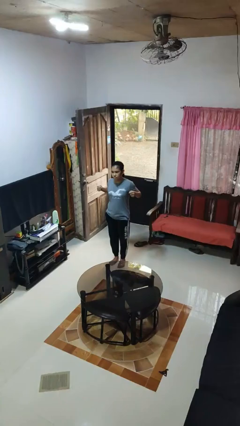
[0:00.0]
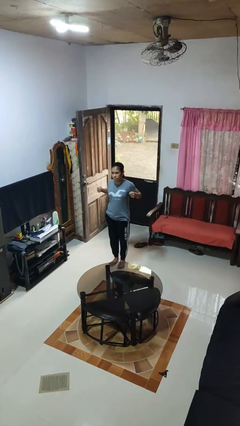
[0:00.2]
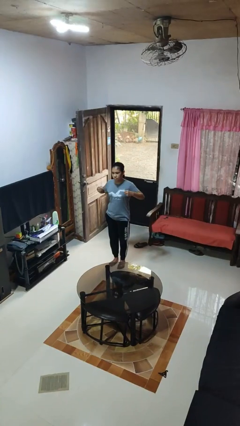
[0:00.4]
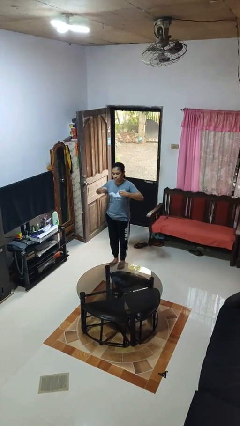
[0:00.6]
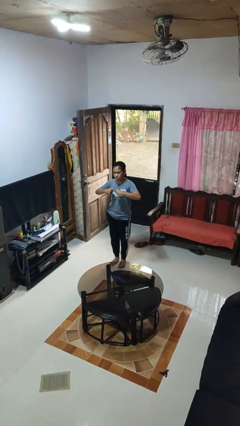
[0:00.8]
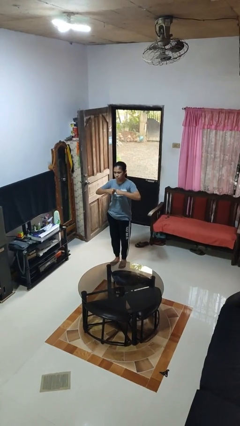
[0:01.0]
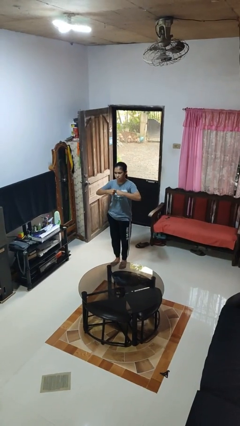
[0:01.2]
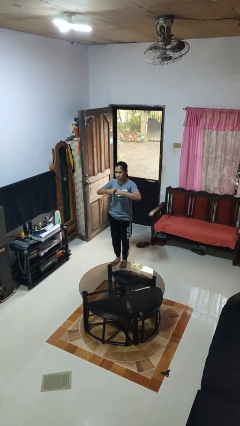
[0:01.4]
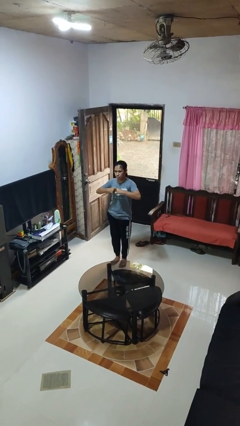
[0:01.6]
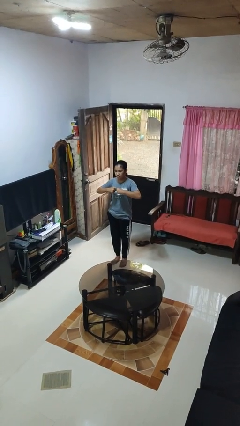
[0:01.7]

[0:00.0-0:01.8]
person gestures zoom out

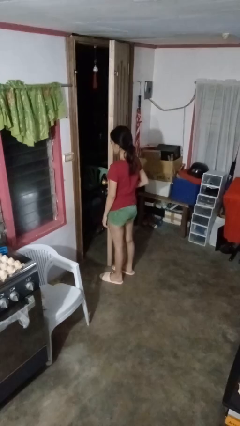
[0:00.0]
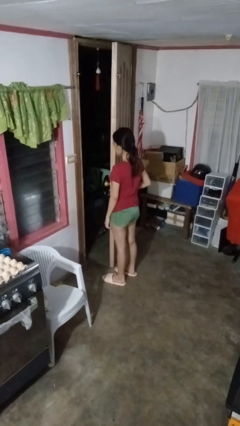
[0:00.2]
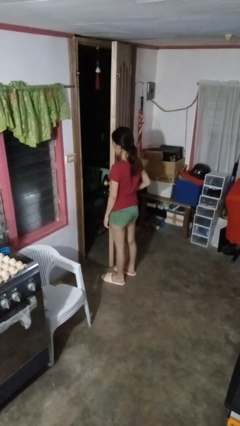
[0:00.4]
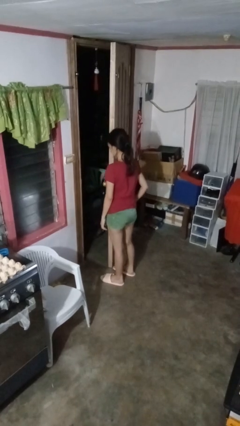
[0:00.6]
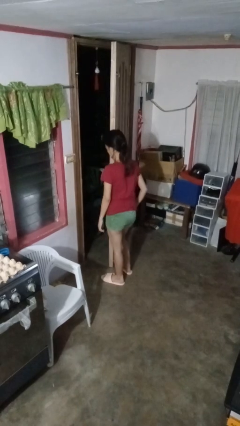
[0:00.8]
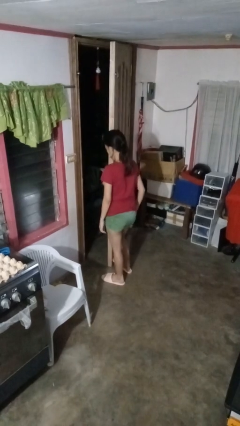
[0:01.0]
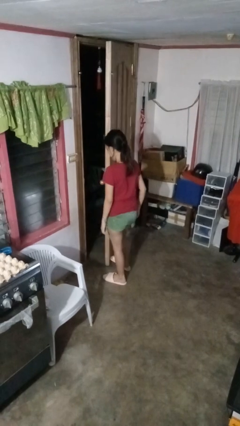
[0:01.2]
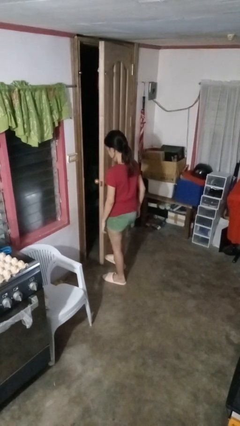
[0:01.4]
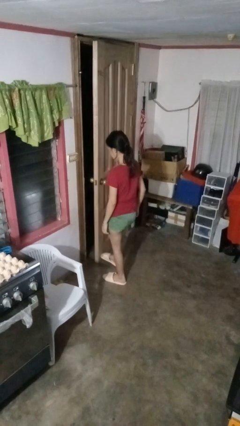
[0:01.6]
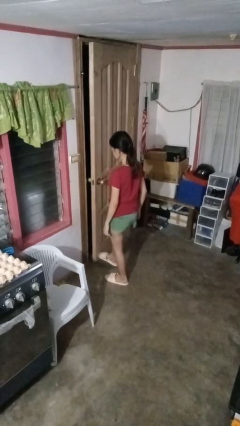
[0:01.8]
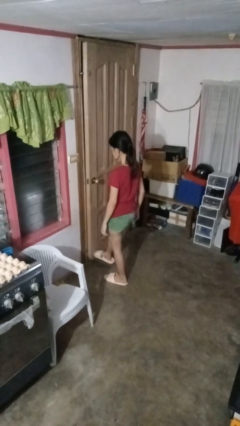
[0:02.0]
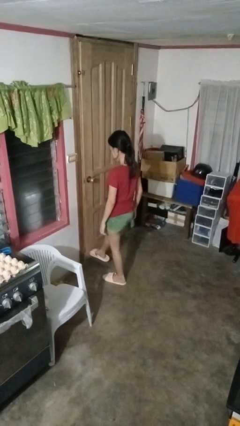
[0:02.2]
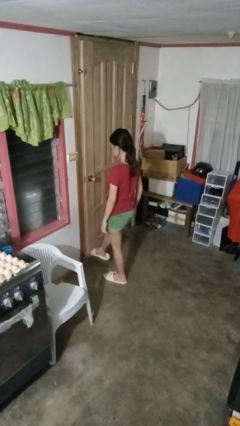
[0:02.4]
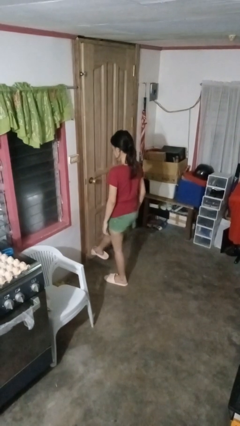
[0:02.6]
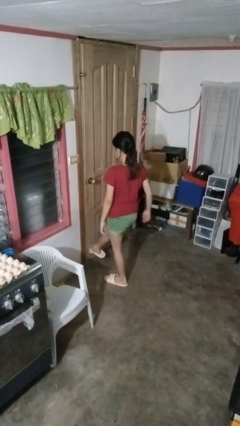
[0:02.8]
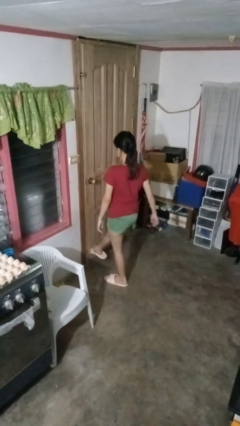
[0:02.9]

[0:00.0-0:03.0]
person closes door with foot

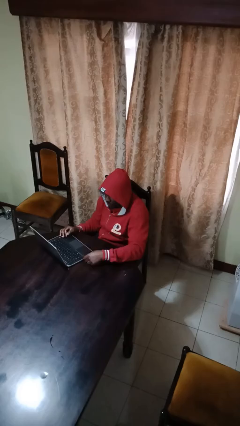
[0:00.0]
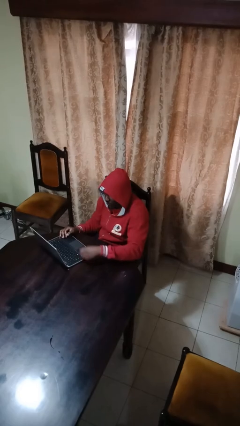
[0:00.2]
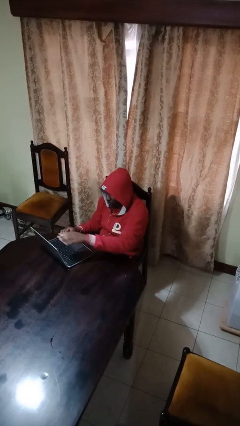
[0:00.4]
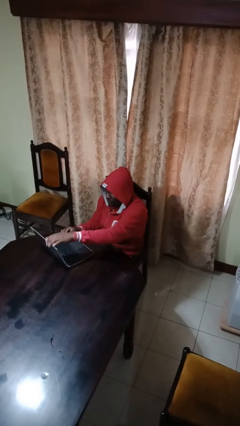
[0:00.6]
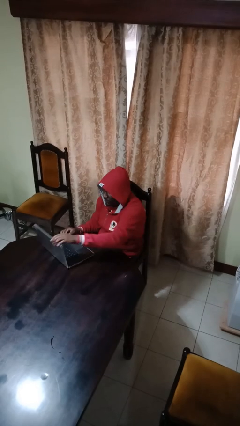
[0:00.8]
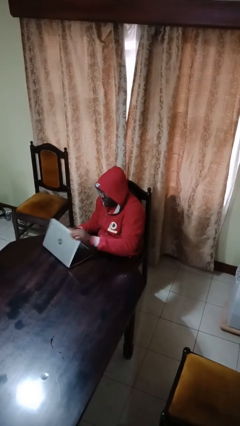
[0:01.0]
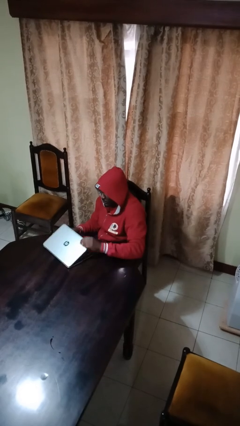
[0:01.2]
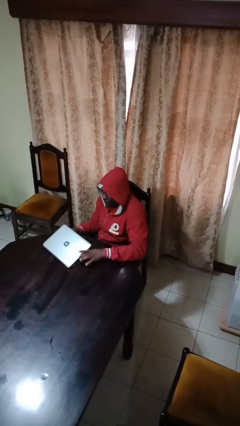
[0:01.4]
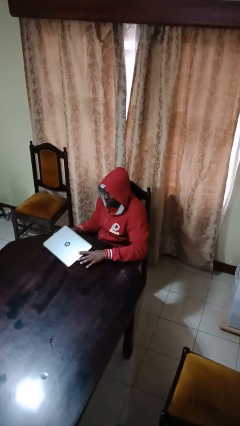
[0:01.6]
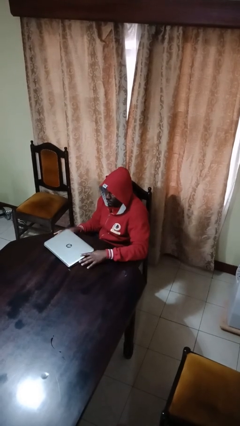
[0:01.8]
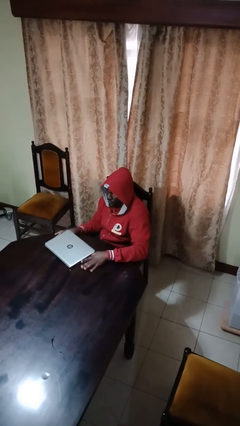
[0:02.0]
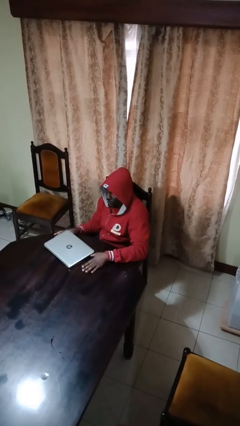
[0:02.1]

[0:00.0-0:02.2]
person closes laptop

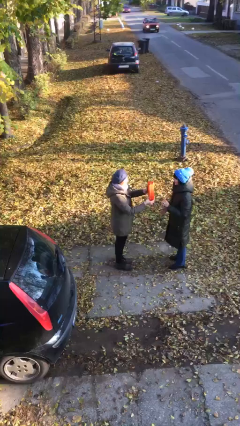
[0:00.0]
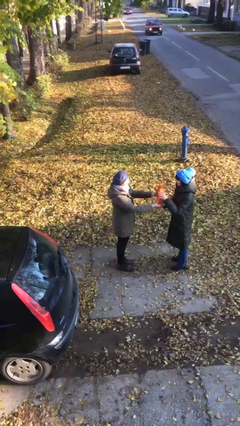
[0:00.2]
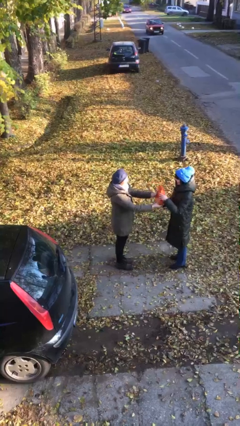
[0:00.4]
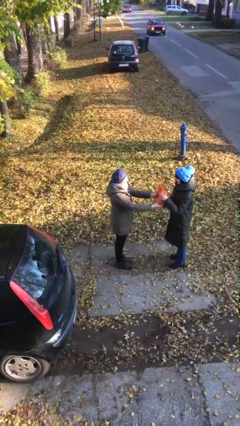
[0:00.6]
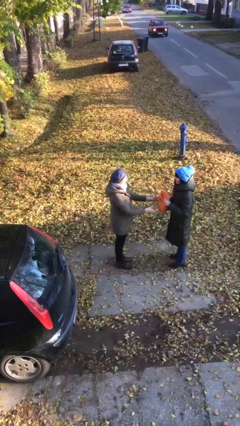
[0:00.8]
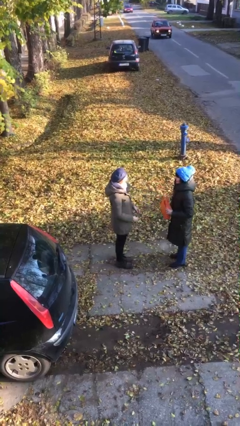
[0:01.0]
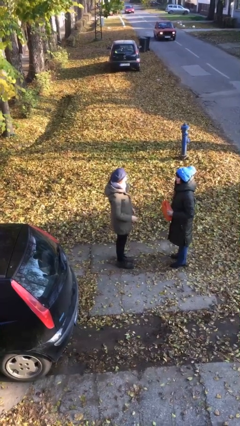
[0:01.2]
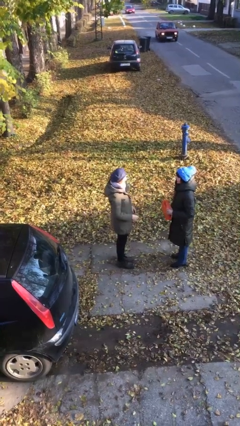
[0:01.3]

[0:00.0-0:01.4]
person transfers object to person

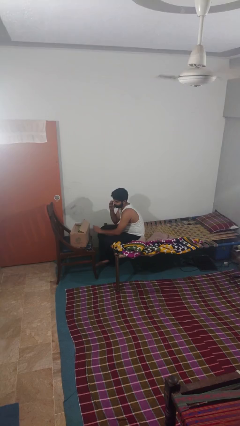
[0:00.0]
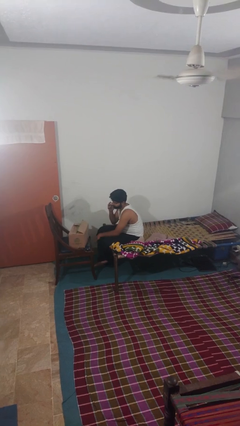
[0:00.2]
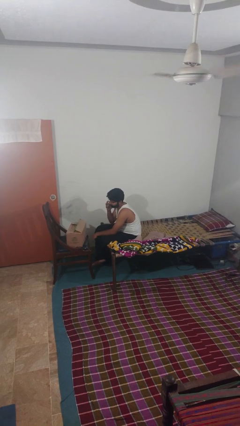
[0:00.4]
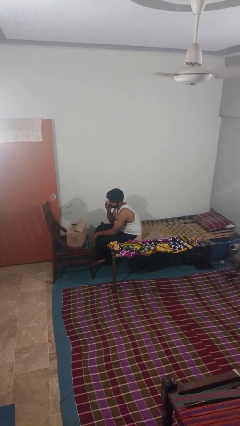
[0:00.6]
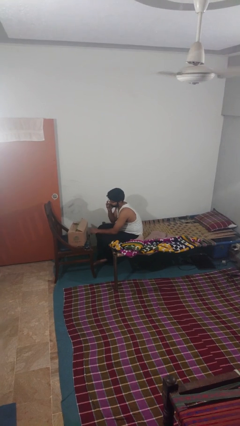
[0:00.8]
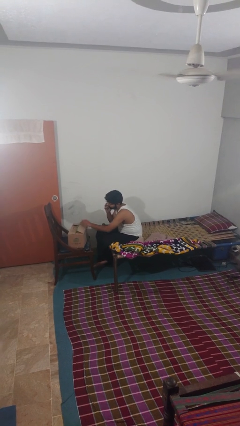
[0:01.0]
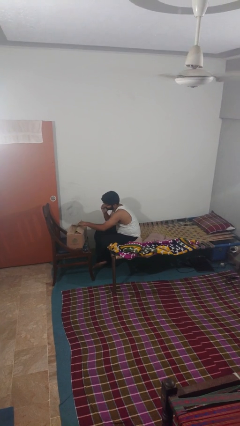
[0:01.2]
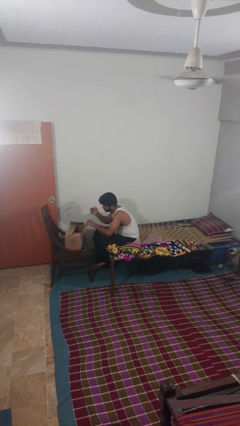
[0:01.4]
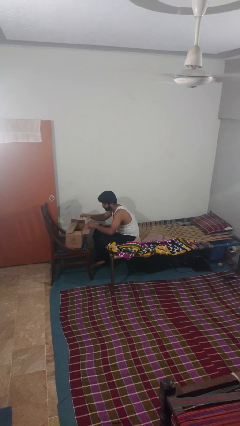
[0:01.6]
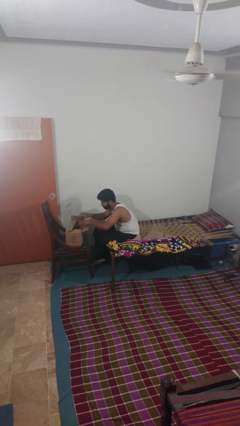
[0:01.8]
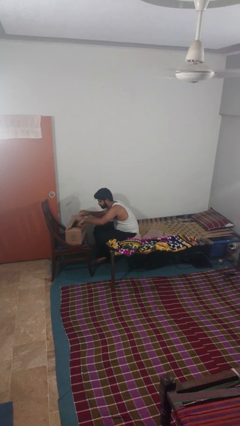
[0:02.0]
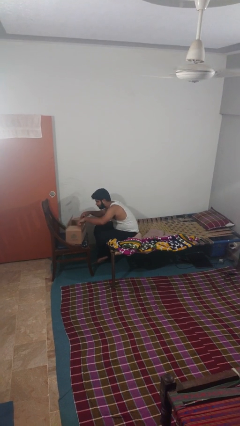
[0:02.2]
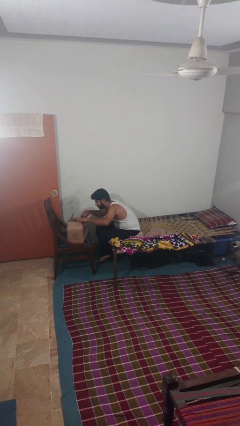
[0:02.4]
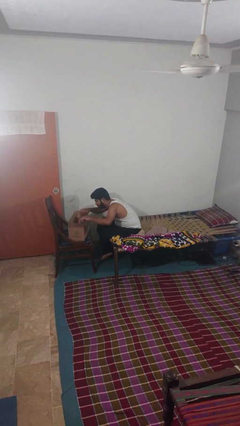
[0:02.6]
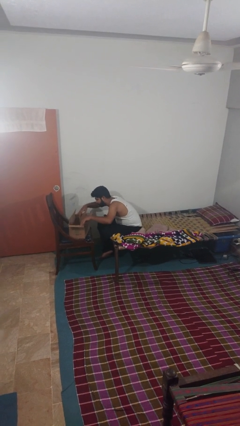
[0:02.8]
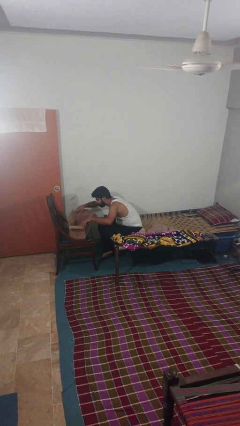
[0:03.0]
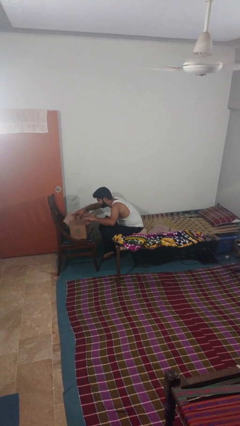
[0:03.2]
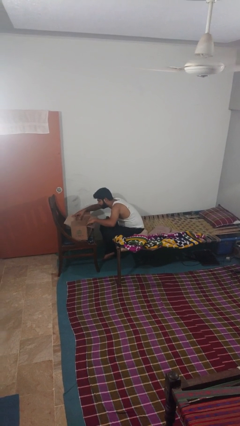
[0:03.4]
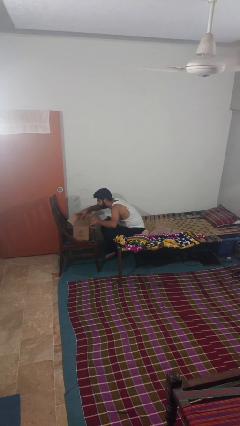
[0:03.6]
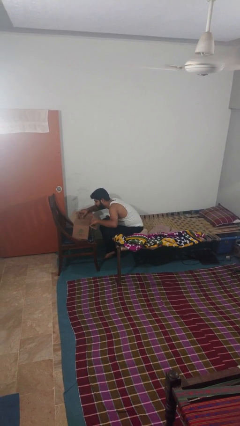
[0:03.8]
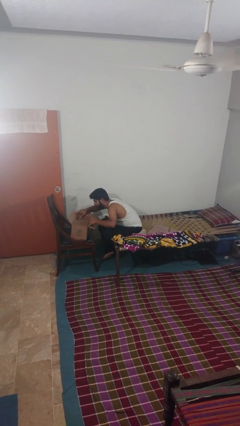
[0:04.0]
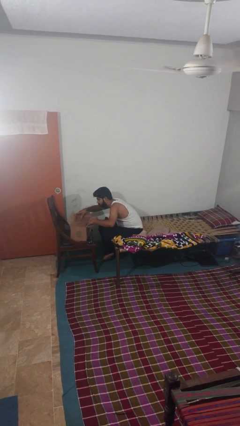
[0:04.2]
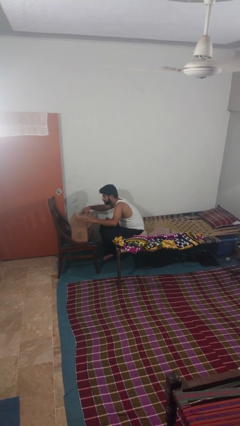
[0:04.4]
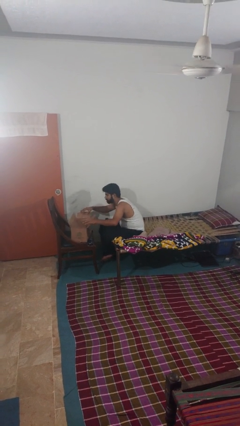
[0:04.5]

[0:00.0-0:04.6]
person opens box

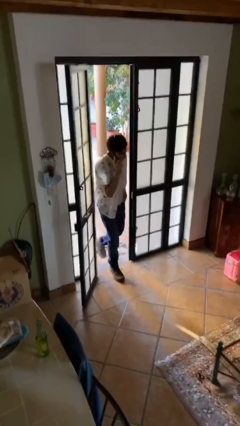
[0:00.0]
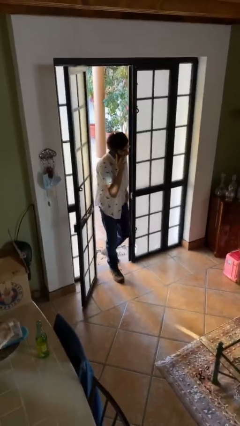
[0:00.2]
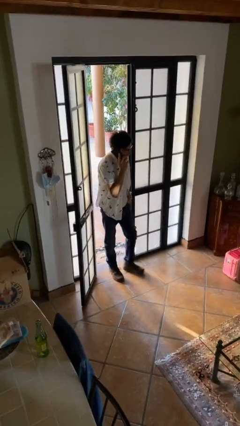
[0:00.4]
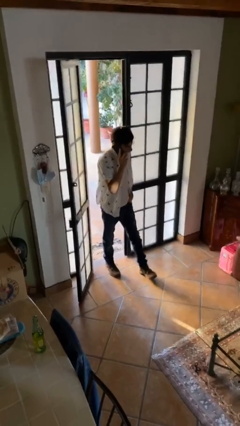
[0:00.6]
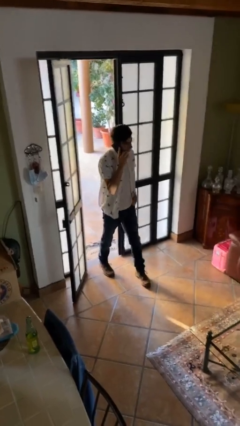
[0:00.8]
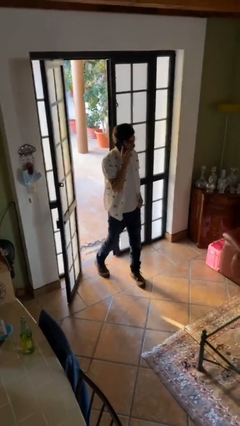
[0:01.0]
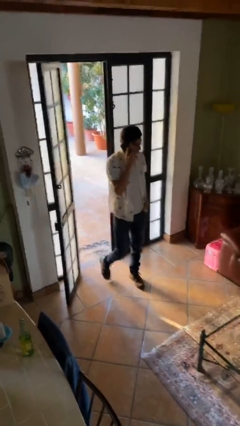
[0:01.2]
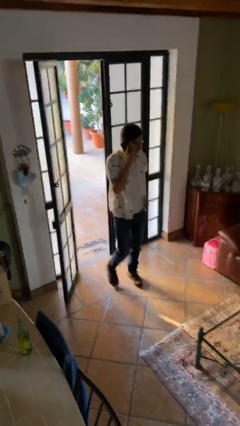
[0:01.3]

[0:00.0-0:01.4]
person enters scene through structure

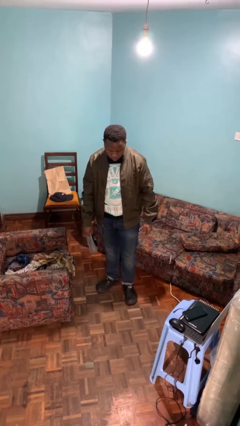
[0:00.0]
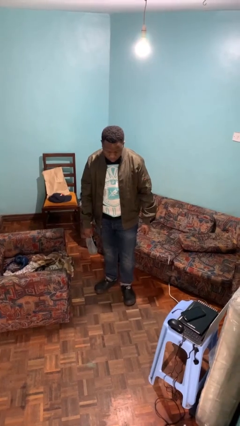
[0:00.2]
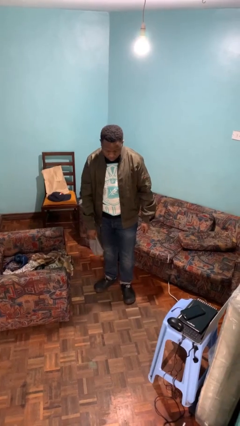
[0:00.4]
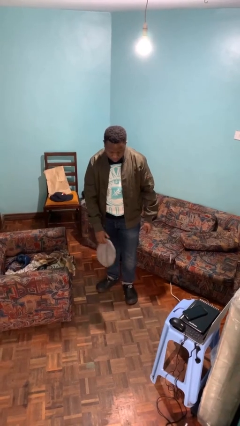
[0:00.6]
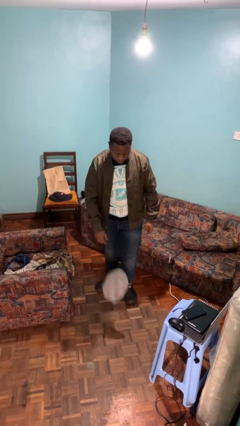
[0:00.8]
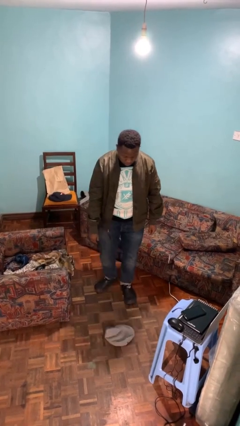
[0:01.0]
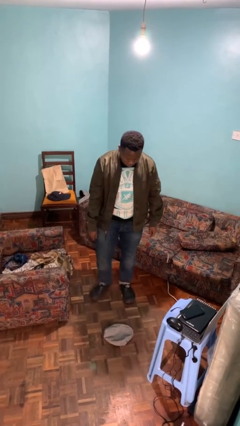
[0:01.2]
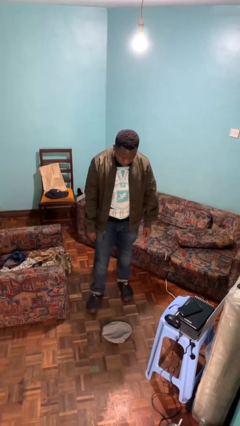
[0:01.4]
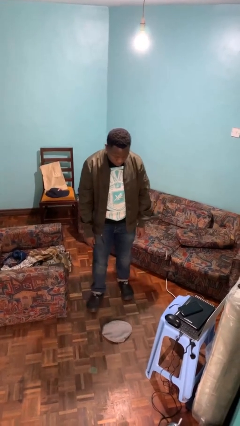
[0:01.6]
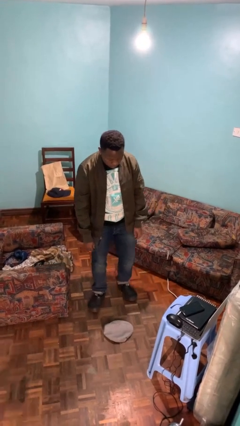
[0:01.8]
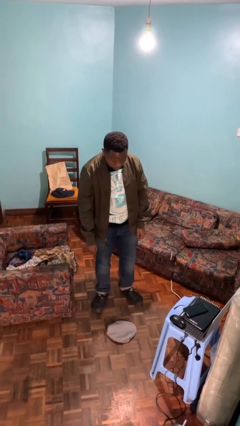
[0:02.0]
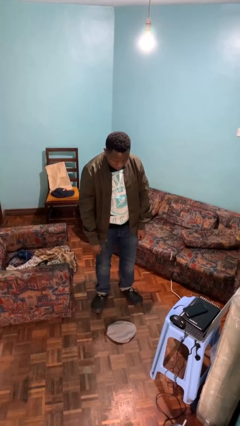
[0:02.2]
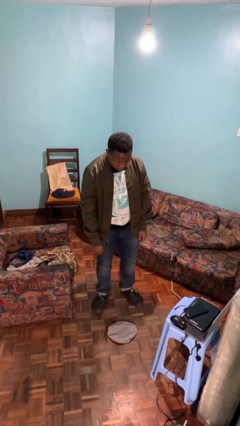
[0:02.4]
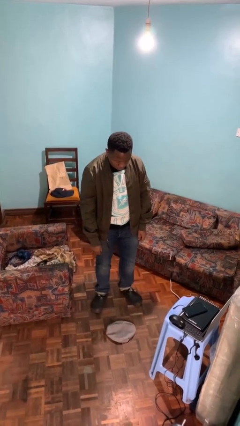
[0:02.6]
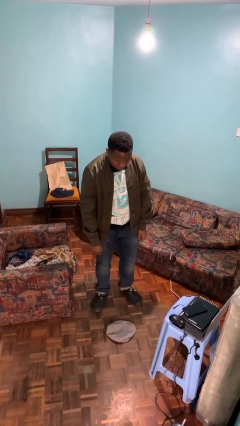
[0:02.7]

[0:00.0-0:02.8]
person drops object
